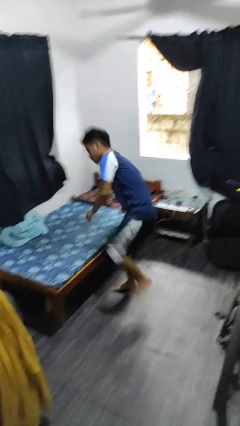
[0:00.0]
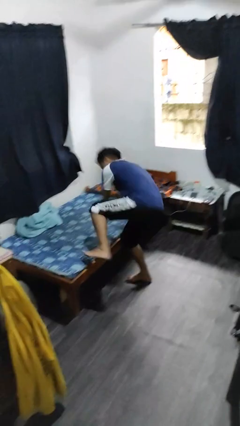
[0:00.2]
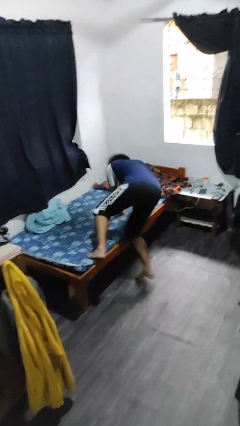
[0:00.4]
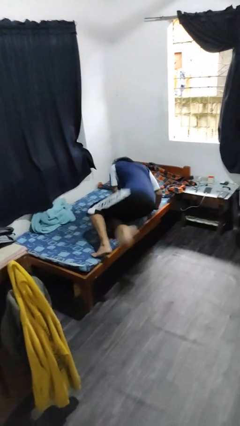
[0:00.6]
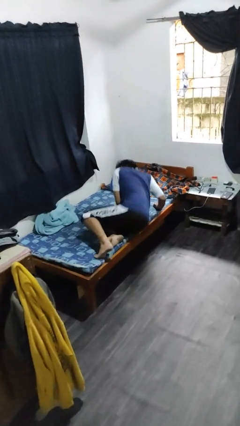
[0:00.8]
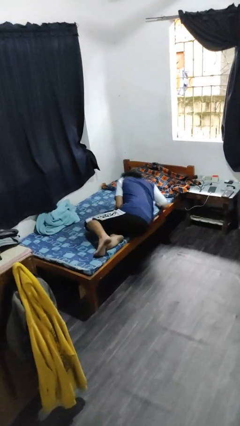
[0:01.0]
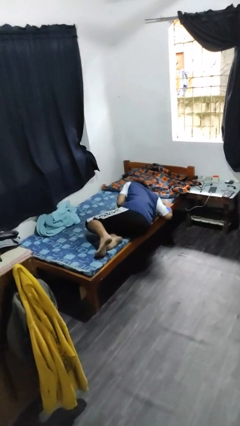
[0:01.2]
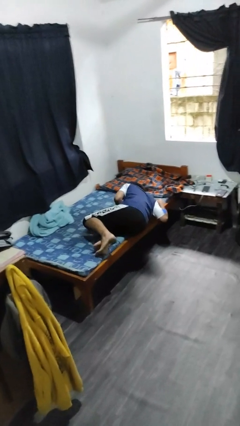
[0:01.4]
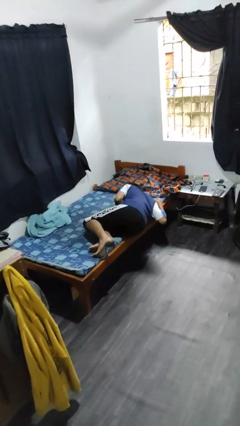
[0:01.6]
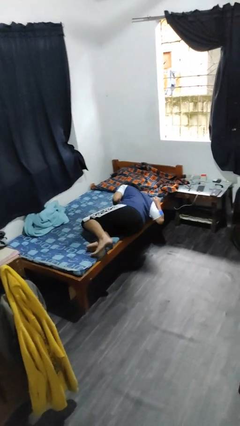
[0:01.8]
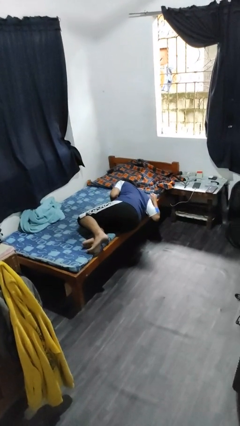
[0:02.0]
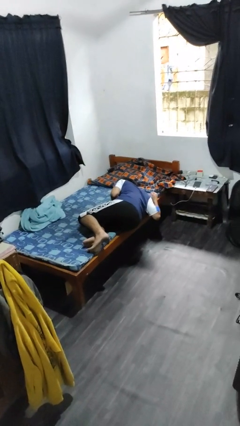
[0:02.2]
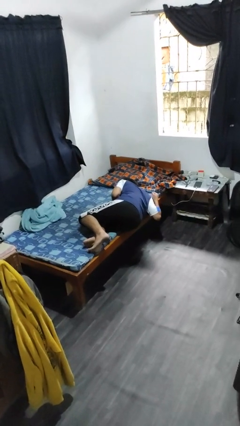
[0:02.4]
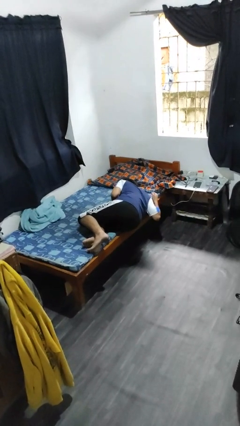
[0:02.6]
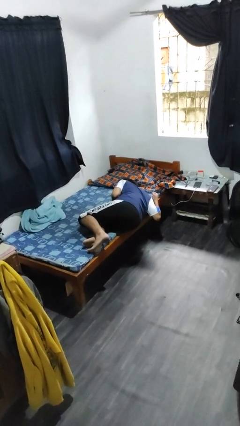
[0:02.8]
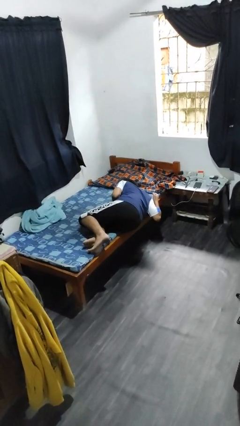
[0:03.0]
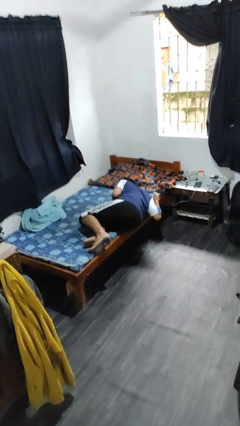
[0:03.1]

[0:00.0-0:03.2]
person lies down on bed

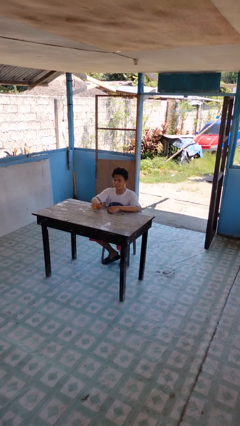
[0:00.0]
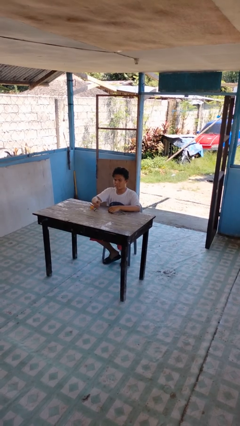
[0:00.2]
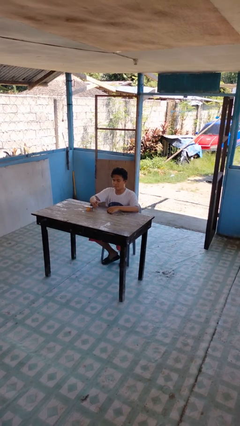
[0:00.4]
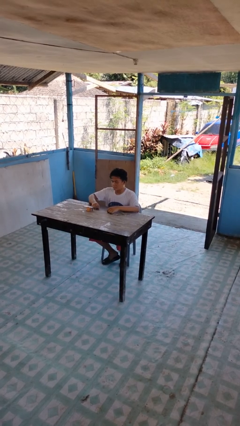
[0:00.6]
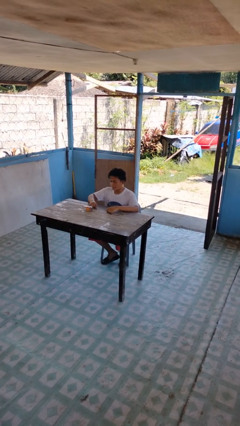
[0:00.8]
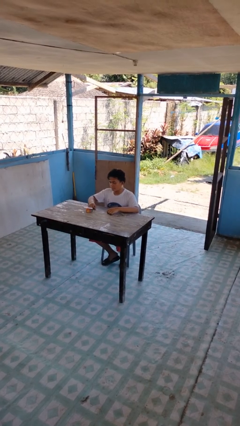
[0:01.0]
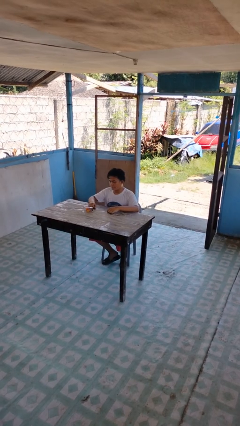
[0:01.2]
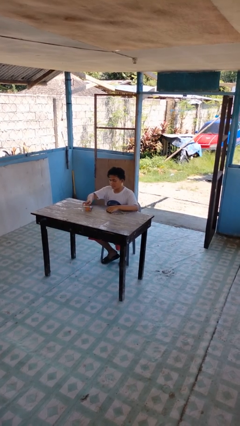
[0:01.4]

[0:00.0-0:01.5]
person knocks over glass

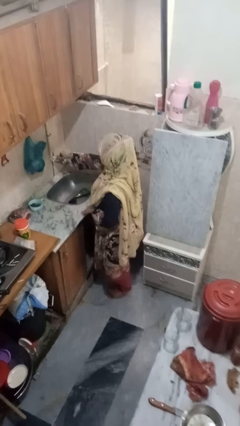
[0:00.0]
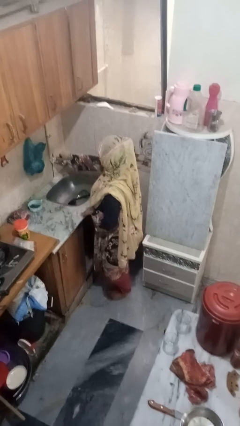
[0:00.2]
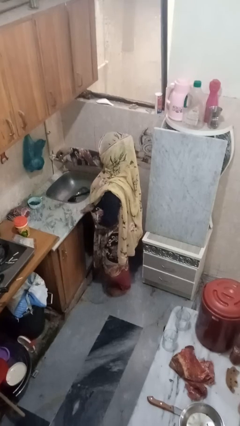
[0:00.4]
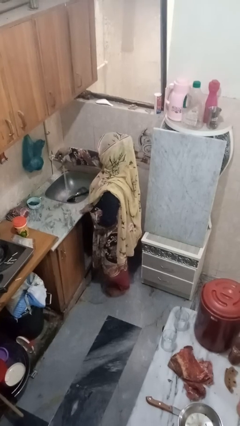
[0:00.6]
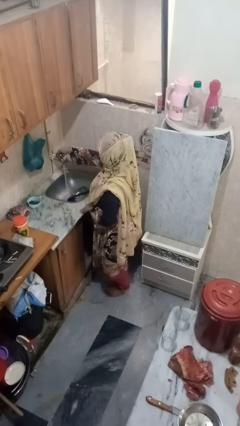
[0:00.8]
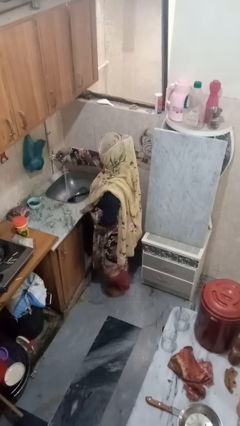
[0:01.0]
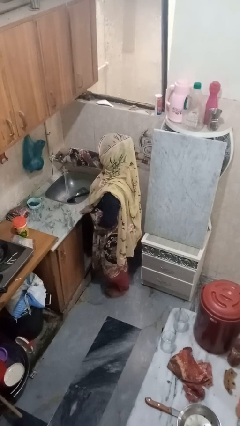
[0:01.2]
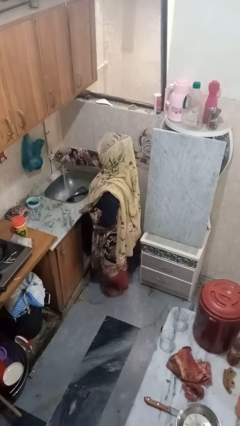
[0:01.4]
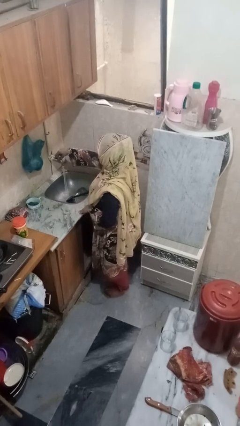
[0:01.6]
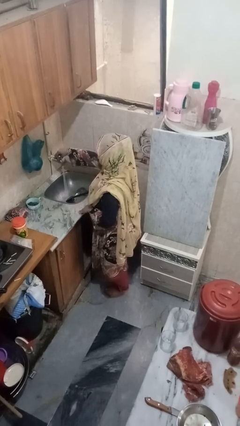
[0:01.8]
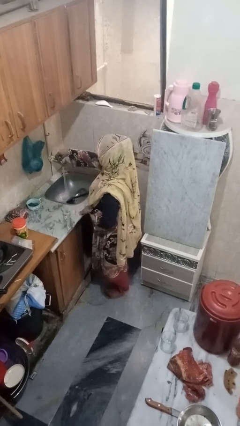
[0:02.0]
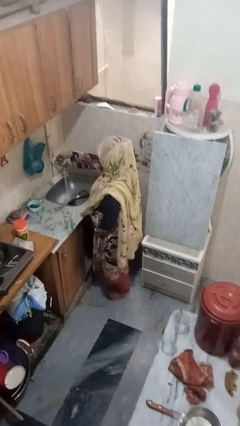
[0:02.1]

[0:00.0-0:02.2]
person turns on faucet

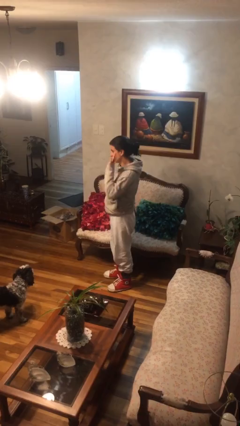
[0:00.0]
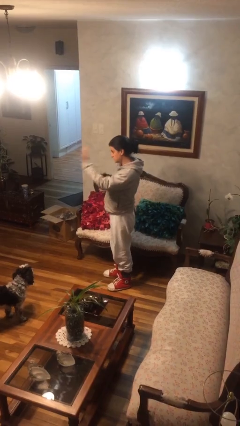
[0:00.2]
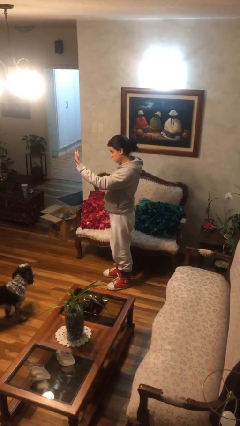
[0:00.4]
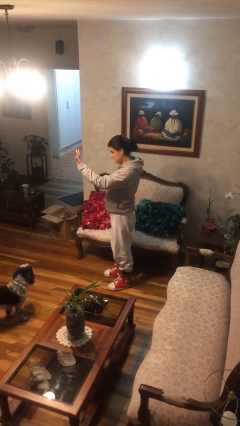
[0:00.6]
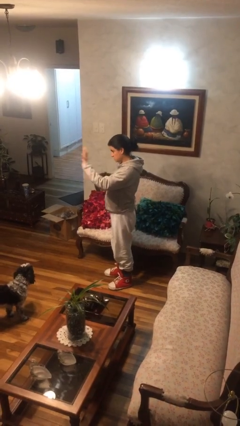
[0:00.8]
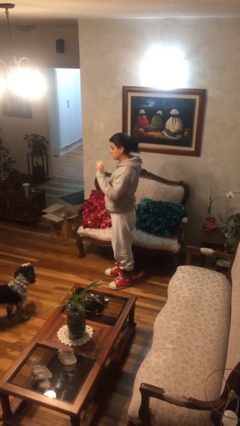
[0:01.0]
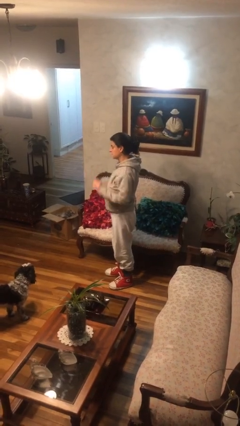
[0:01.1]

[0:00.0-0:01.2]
person gestures number five

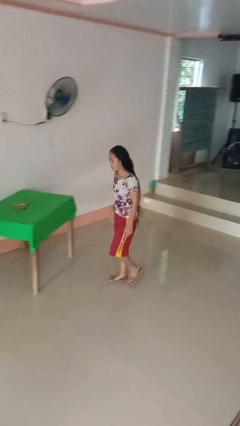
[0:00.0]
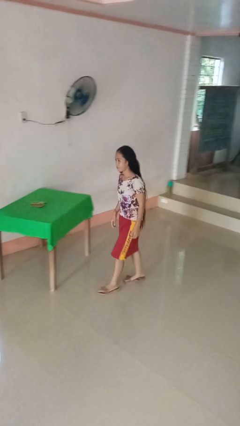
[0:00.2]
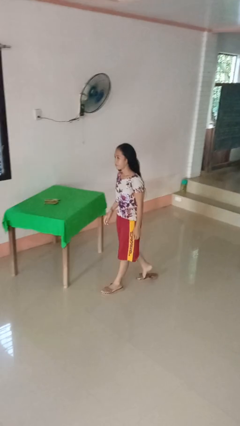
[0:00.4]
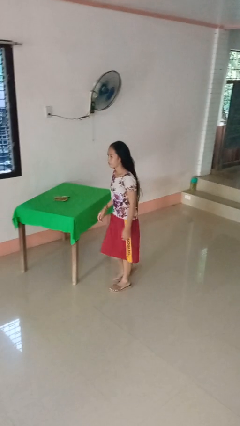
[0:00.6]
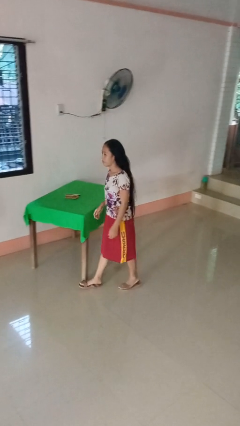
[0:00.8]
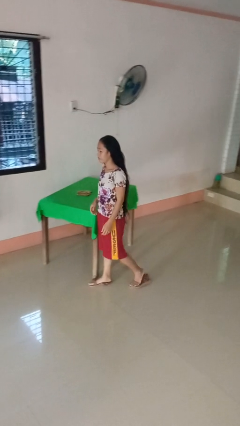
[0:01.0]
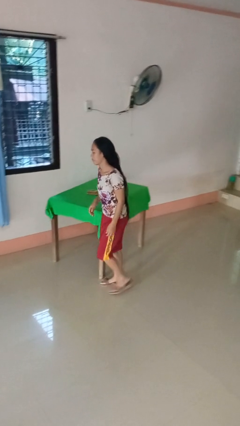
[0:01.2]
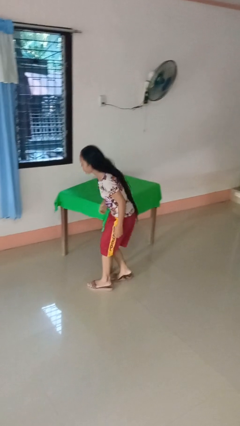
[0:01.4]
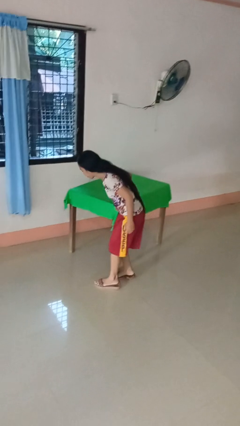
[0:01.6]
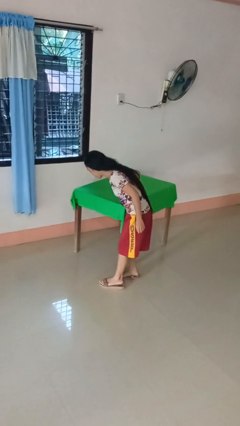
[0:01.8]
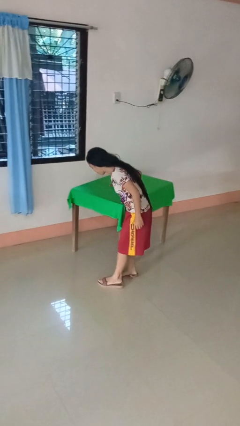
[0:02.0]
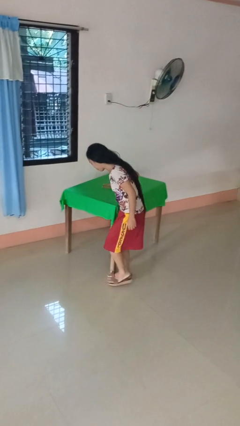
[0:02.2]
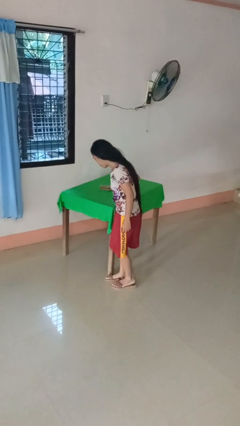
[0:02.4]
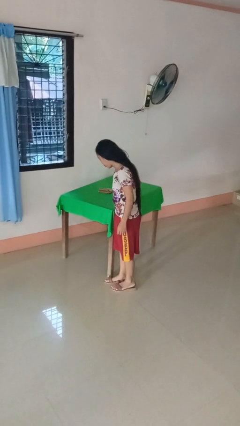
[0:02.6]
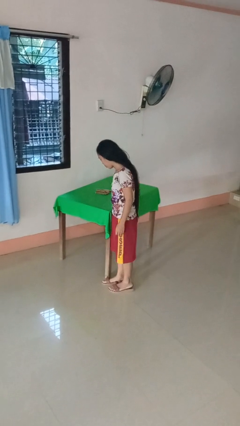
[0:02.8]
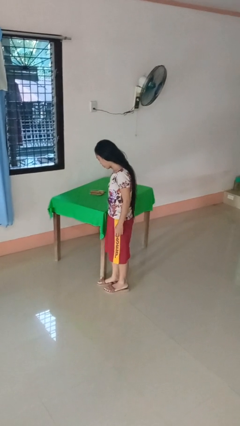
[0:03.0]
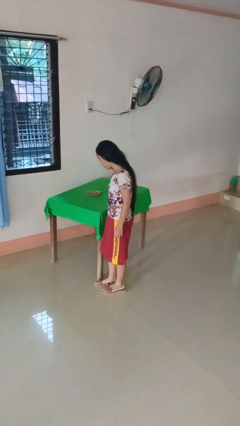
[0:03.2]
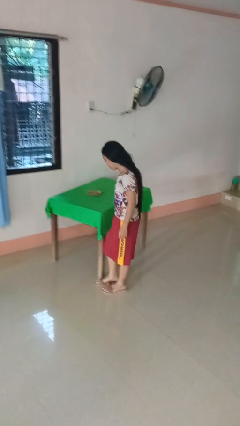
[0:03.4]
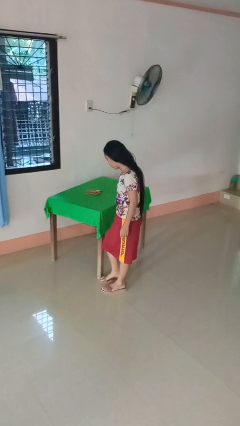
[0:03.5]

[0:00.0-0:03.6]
person bumps into table

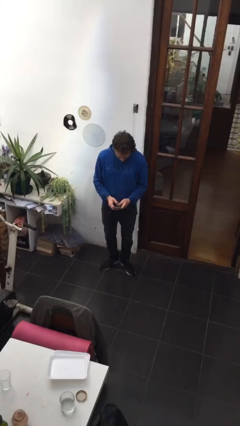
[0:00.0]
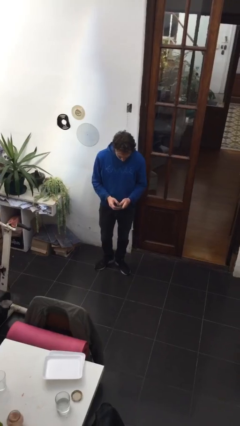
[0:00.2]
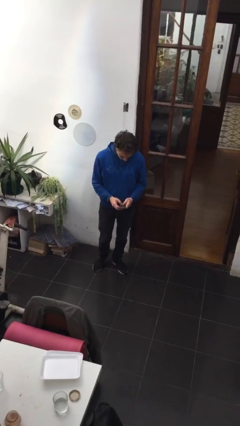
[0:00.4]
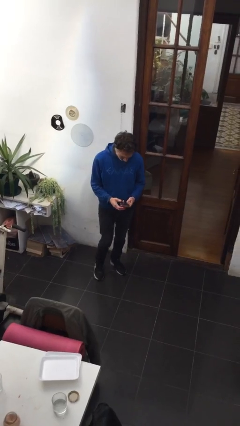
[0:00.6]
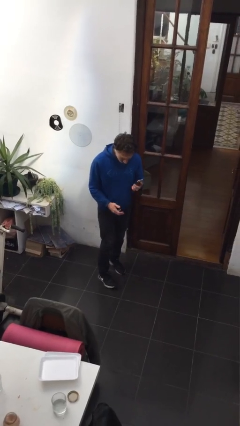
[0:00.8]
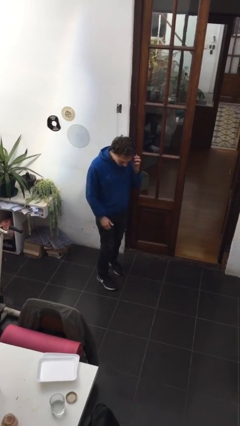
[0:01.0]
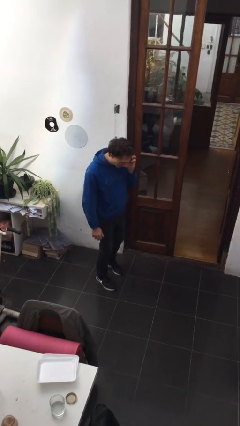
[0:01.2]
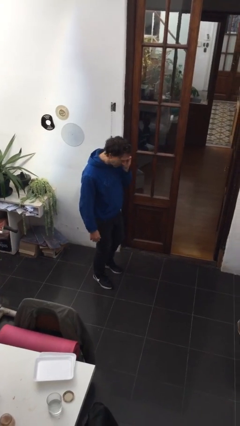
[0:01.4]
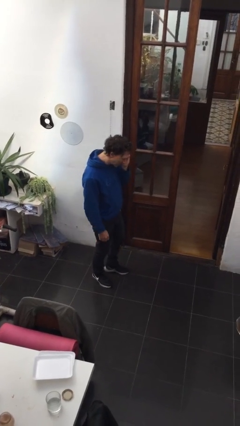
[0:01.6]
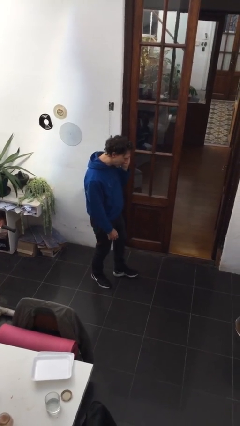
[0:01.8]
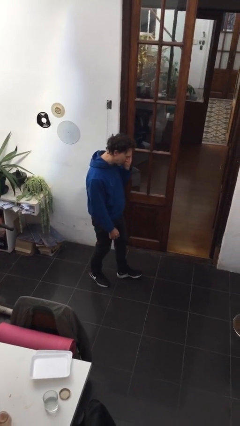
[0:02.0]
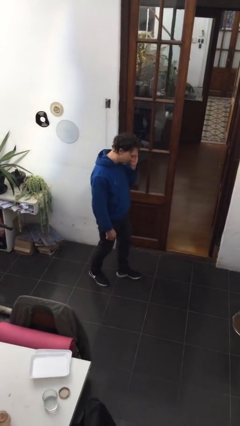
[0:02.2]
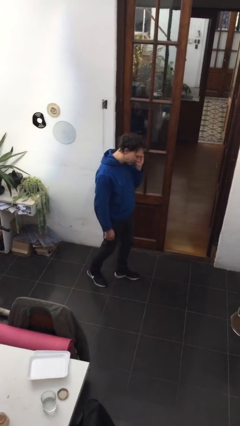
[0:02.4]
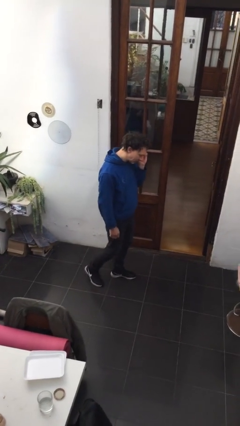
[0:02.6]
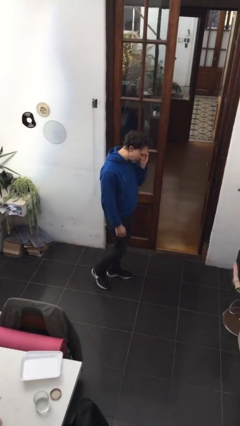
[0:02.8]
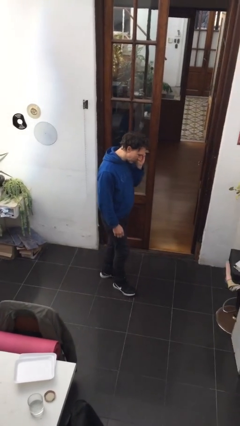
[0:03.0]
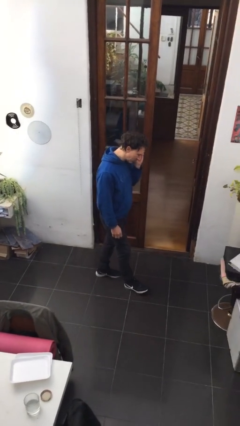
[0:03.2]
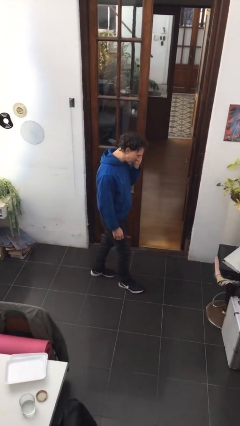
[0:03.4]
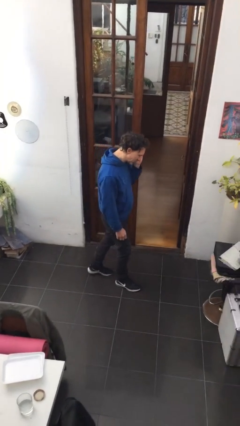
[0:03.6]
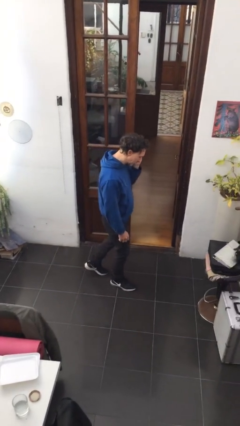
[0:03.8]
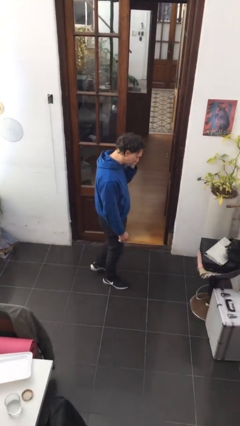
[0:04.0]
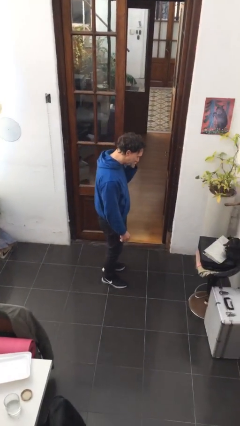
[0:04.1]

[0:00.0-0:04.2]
person talks on phone

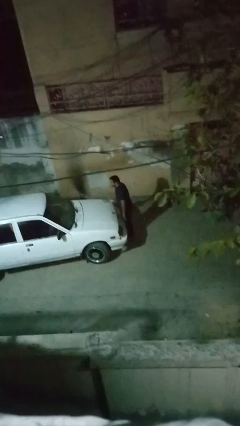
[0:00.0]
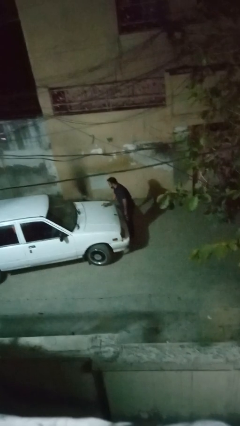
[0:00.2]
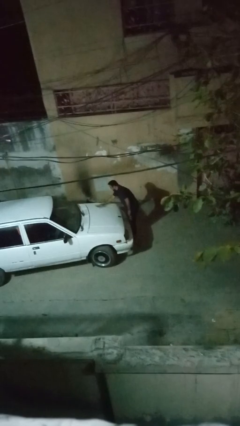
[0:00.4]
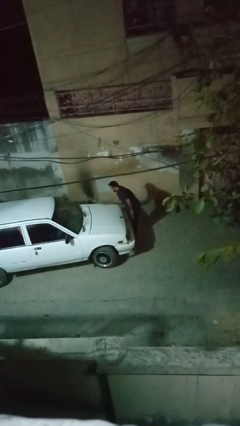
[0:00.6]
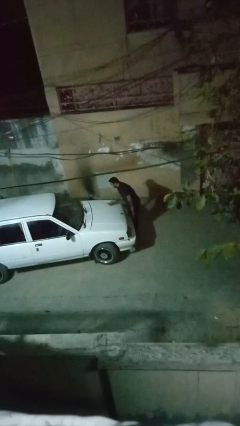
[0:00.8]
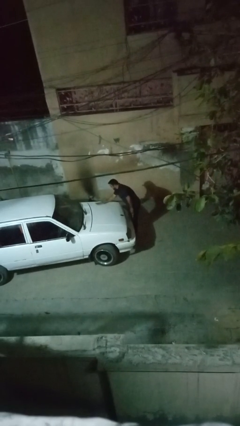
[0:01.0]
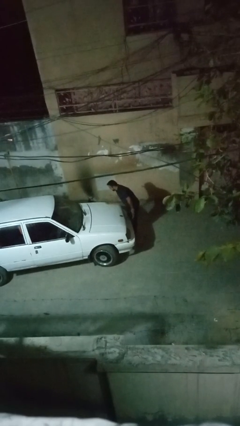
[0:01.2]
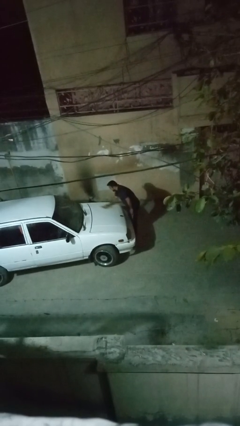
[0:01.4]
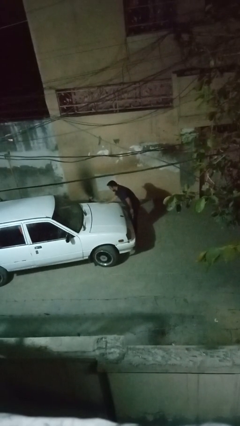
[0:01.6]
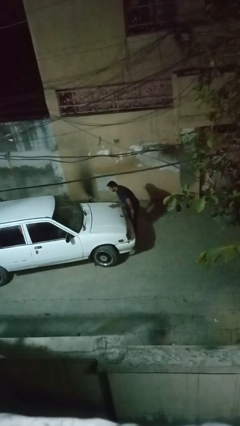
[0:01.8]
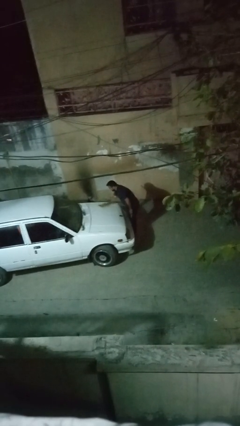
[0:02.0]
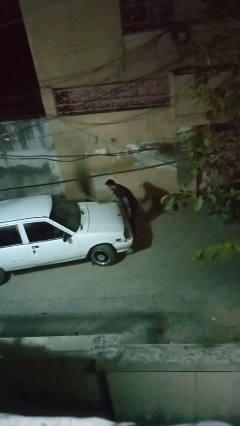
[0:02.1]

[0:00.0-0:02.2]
person polishes car with rag
